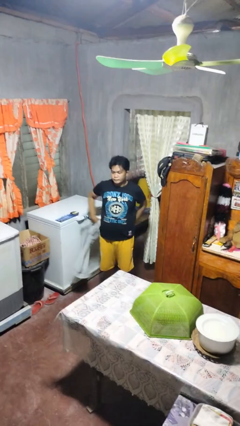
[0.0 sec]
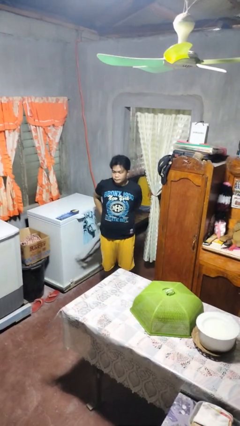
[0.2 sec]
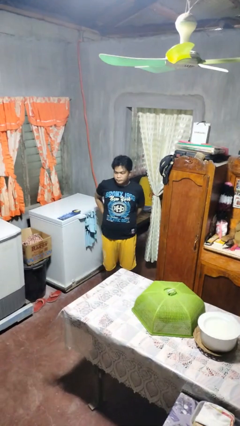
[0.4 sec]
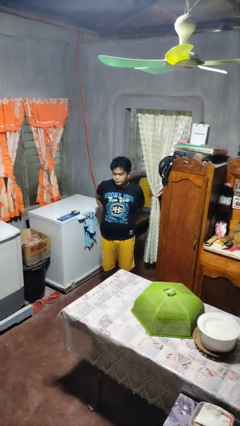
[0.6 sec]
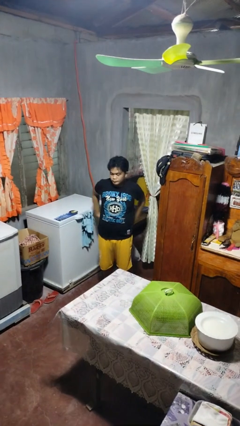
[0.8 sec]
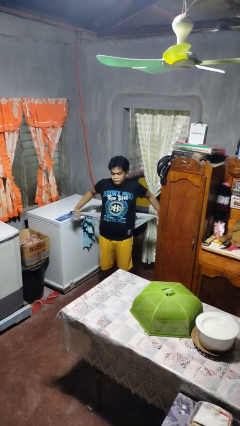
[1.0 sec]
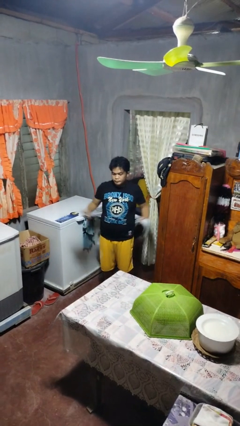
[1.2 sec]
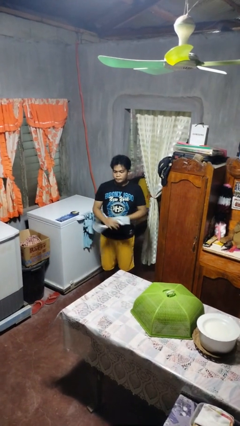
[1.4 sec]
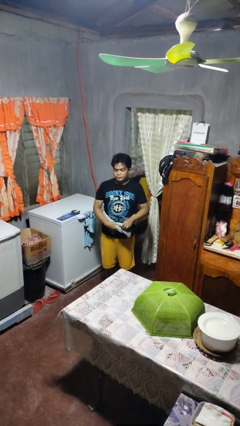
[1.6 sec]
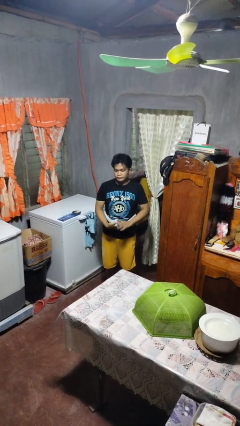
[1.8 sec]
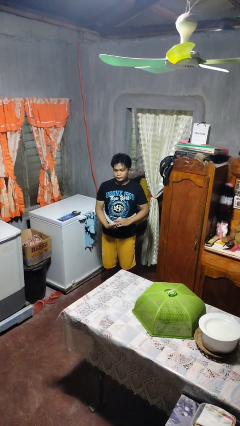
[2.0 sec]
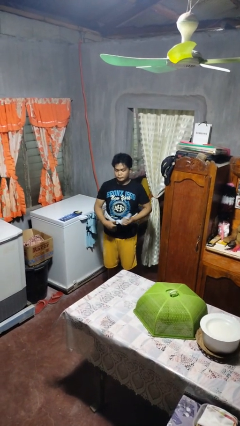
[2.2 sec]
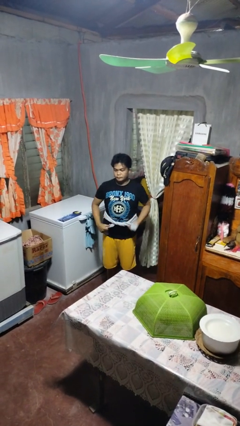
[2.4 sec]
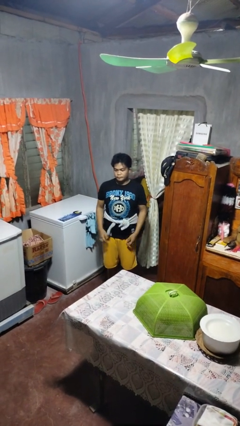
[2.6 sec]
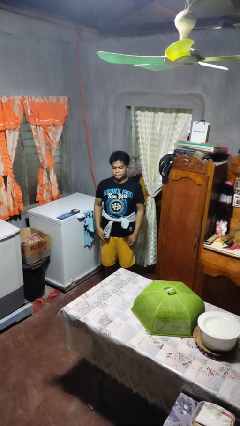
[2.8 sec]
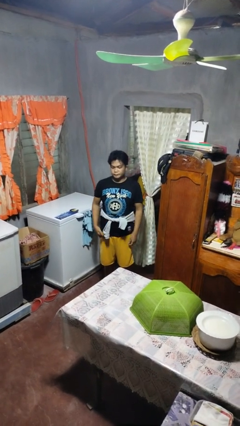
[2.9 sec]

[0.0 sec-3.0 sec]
person ties jacket around waist

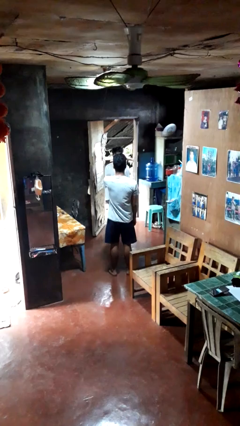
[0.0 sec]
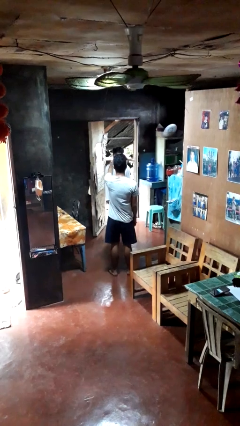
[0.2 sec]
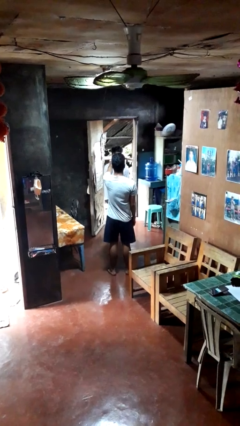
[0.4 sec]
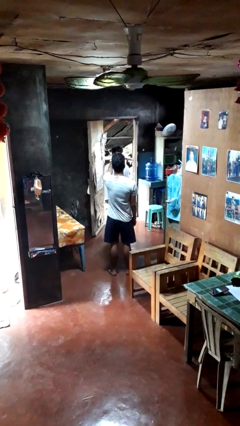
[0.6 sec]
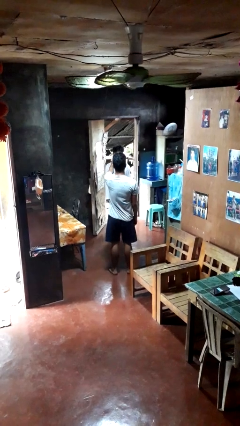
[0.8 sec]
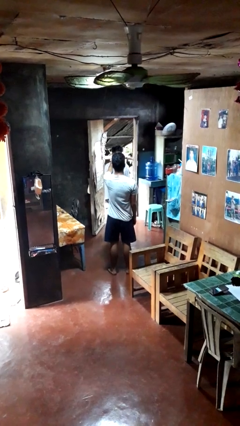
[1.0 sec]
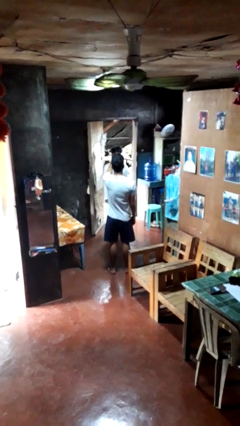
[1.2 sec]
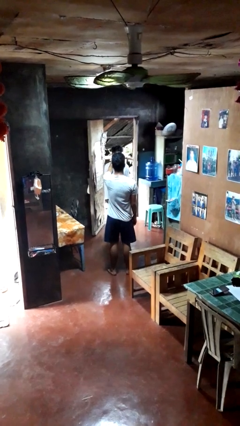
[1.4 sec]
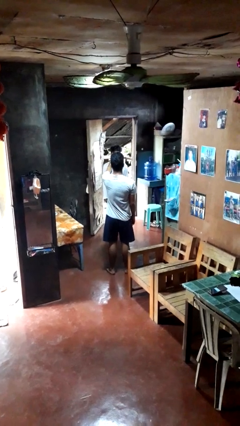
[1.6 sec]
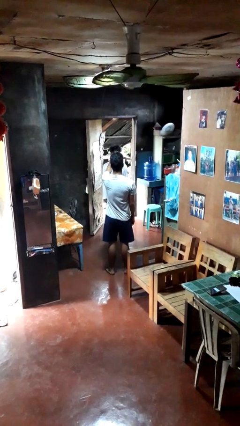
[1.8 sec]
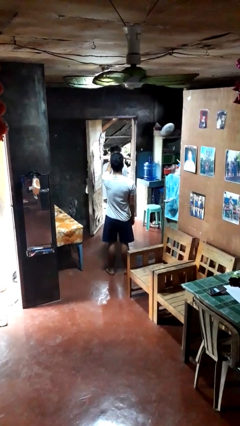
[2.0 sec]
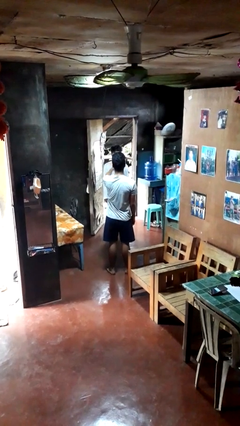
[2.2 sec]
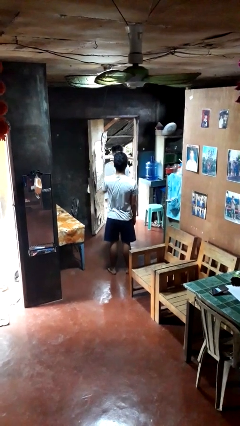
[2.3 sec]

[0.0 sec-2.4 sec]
person points at person

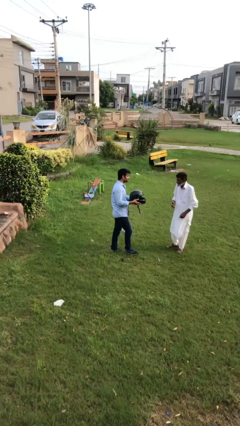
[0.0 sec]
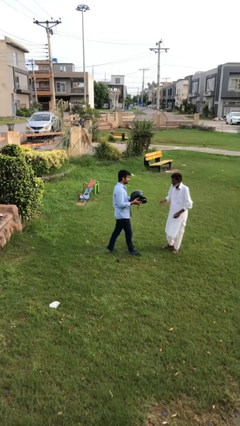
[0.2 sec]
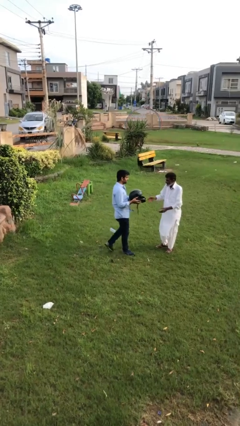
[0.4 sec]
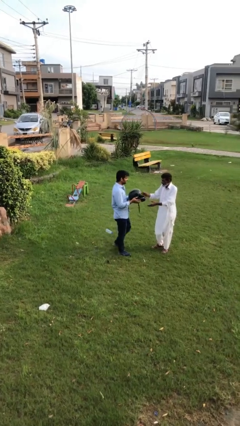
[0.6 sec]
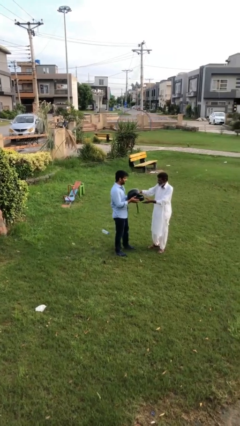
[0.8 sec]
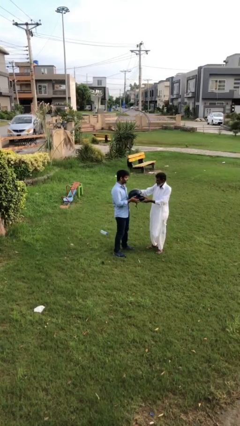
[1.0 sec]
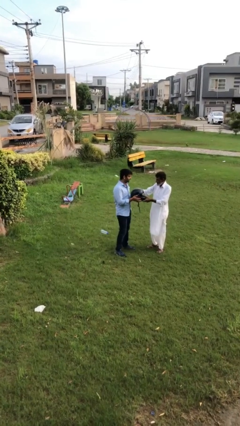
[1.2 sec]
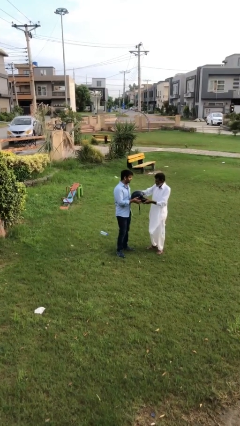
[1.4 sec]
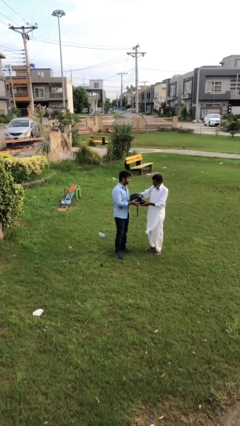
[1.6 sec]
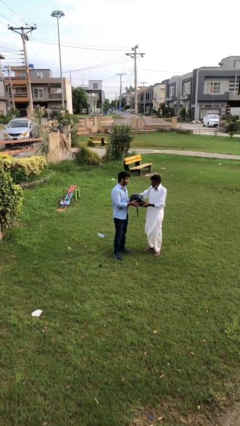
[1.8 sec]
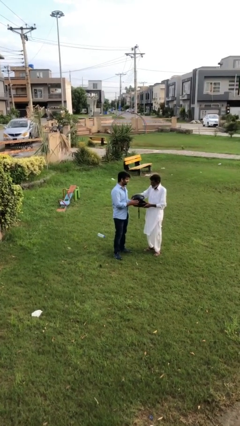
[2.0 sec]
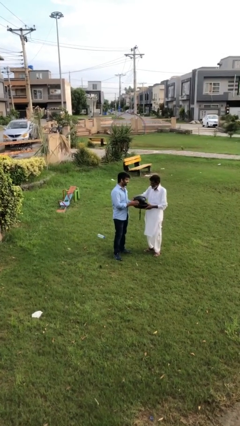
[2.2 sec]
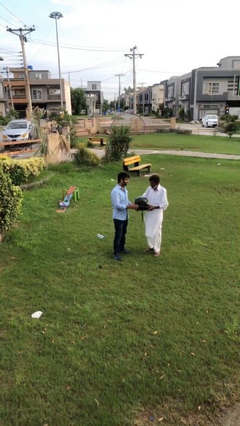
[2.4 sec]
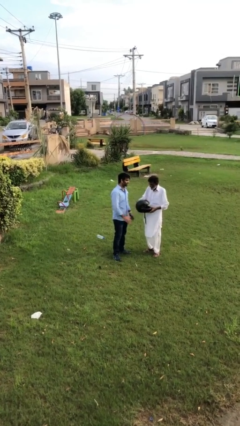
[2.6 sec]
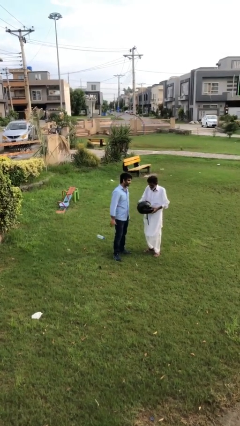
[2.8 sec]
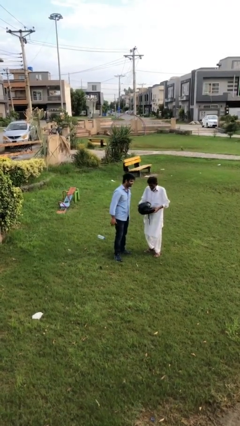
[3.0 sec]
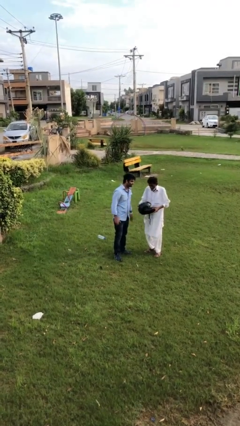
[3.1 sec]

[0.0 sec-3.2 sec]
person transfers object to person

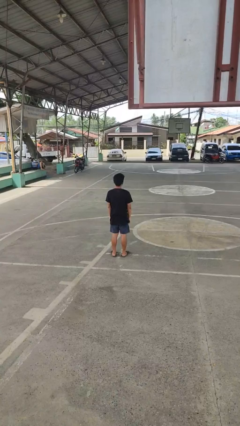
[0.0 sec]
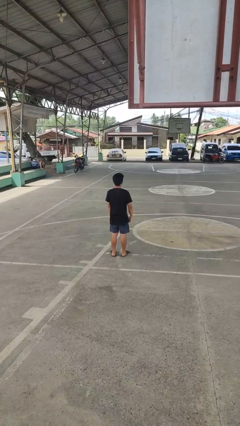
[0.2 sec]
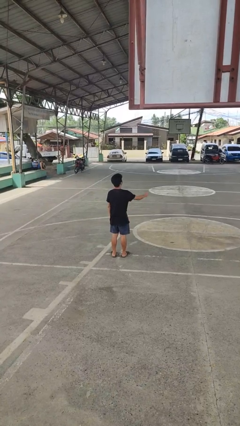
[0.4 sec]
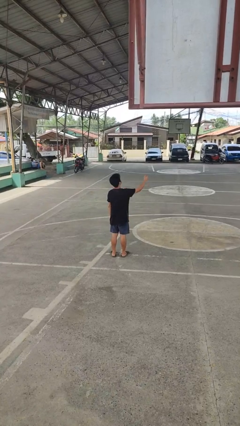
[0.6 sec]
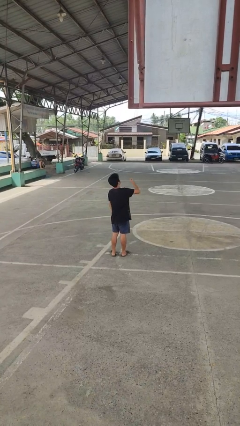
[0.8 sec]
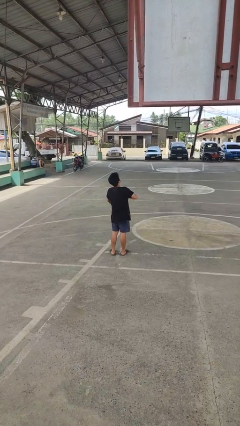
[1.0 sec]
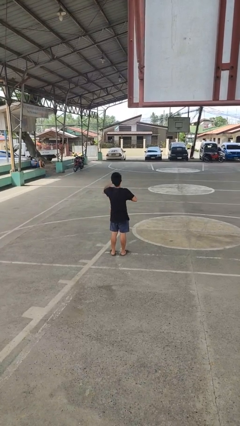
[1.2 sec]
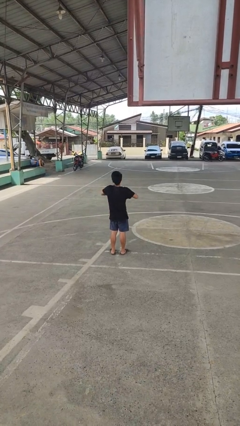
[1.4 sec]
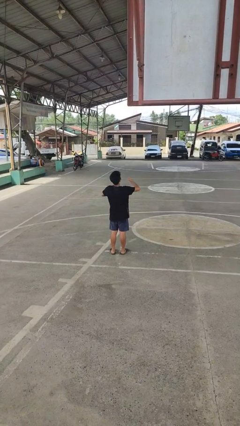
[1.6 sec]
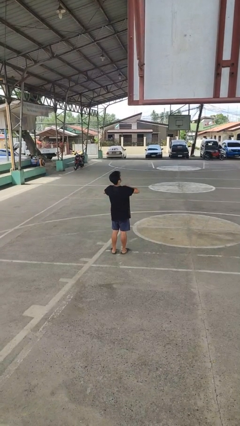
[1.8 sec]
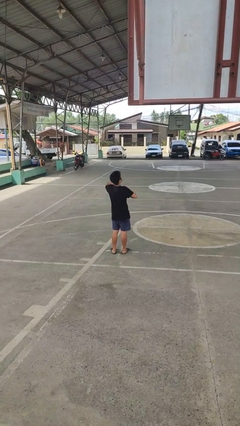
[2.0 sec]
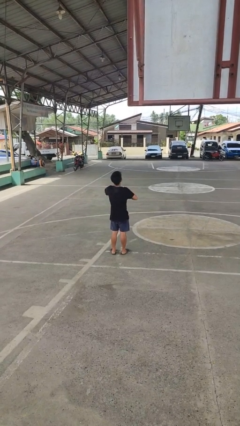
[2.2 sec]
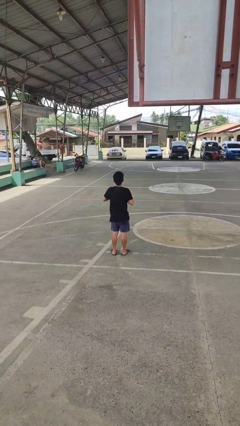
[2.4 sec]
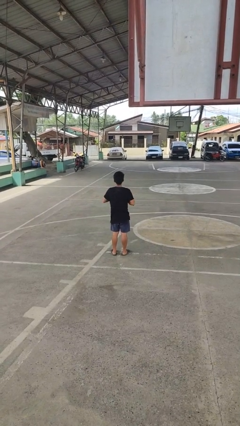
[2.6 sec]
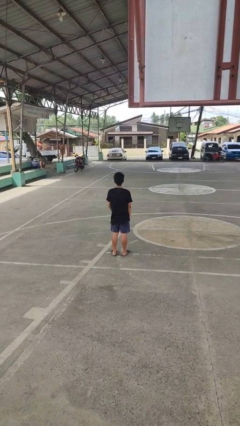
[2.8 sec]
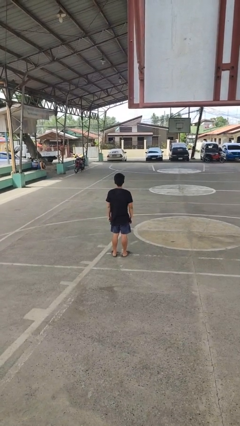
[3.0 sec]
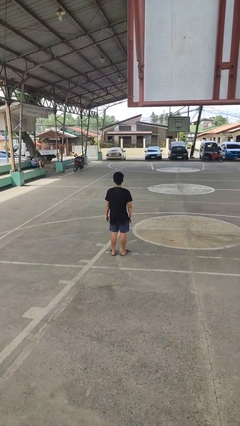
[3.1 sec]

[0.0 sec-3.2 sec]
person drums on chest

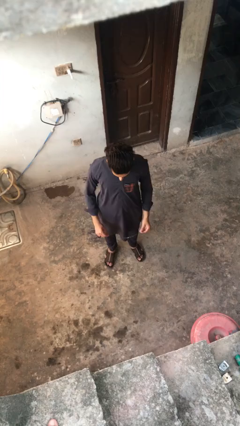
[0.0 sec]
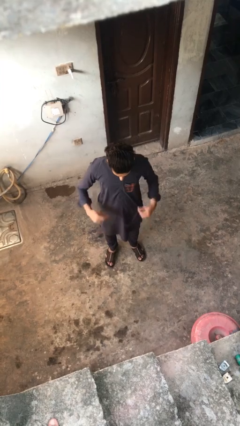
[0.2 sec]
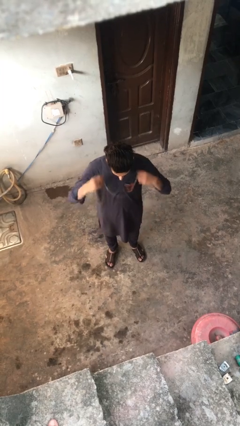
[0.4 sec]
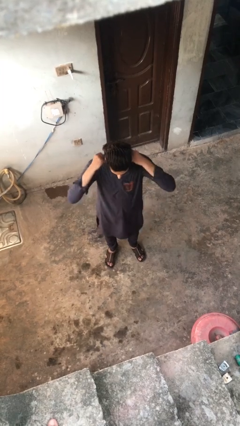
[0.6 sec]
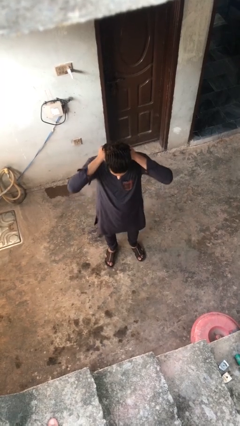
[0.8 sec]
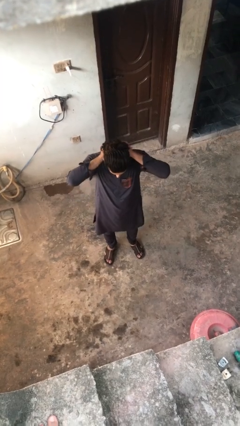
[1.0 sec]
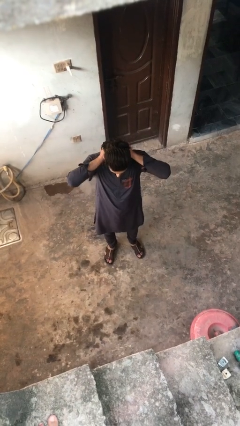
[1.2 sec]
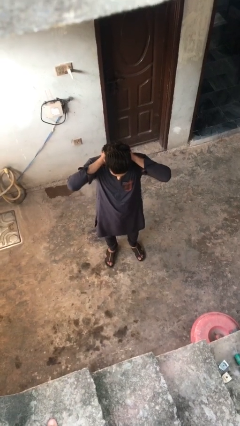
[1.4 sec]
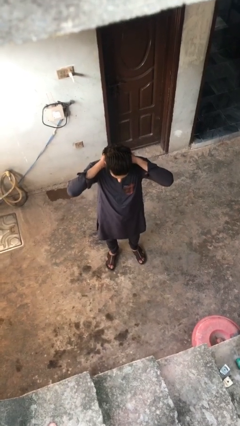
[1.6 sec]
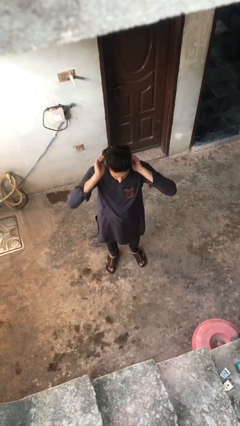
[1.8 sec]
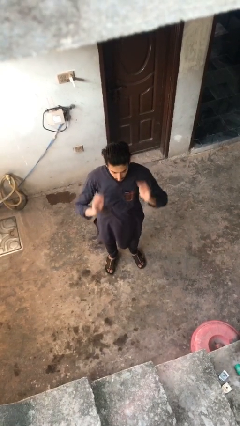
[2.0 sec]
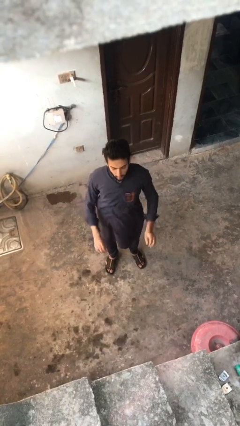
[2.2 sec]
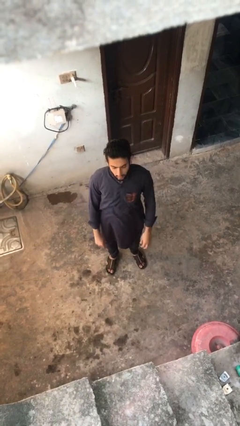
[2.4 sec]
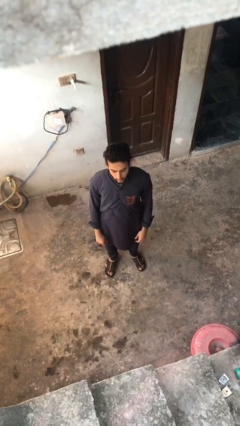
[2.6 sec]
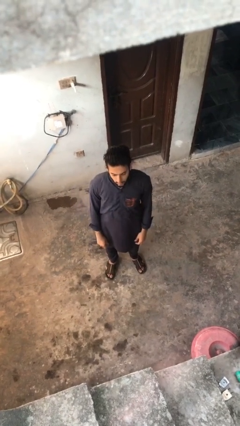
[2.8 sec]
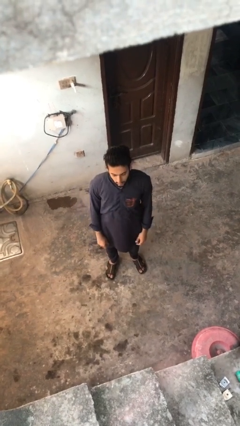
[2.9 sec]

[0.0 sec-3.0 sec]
person puts on necklace

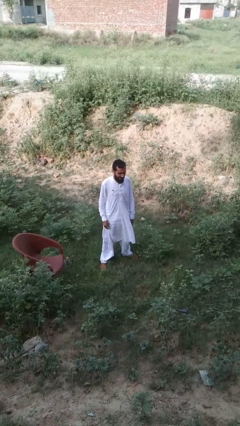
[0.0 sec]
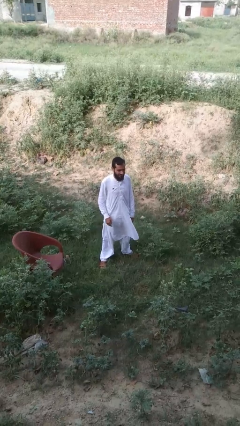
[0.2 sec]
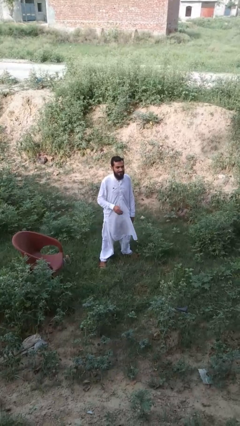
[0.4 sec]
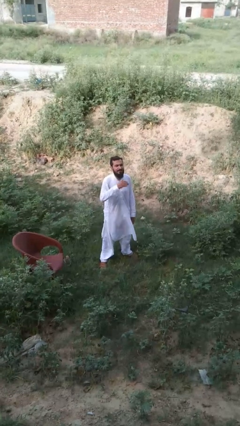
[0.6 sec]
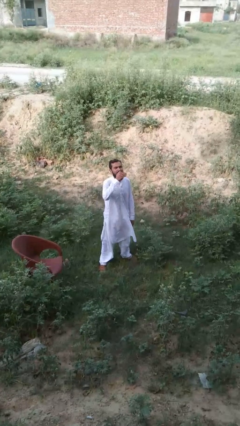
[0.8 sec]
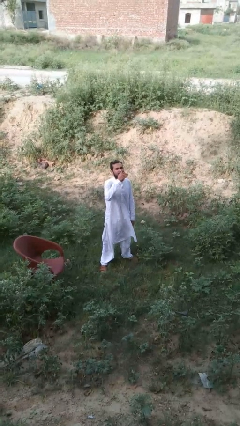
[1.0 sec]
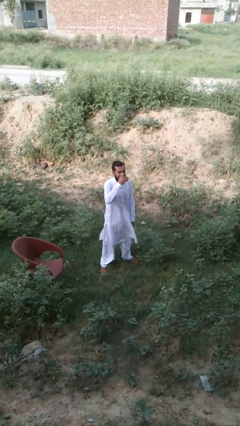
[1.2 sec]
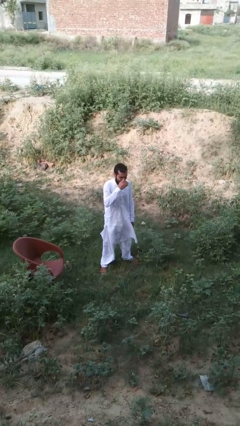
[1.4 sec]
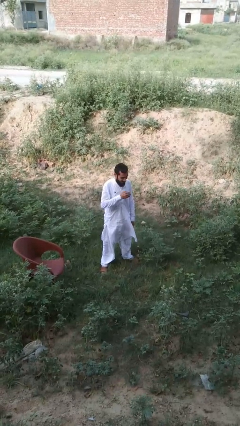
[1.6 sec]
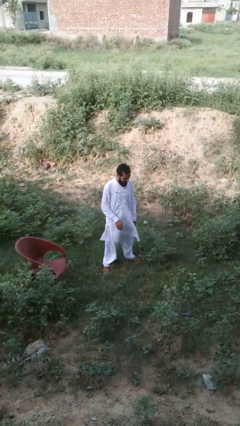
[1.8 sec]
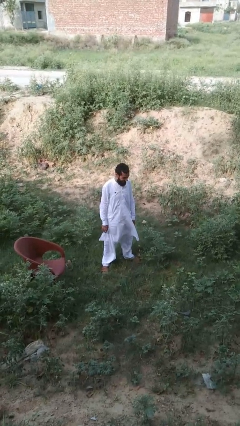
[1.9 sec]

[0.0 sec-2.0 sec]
person sneezes into hand

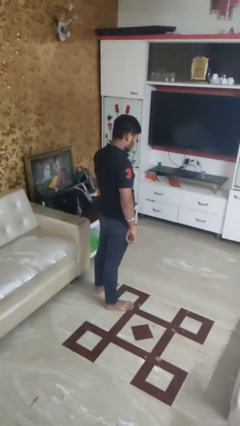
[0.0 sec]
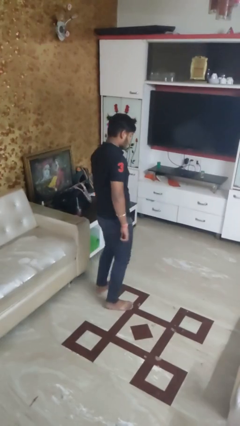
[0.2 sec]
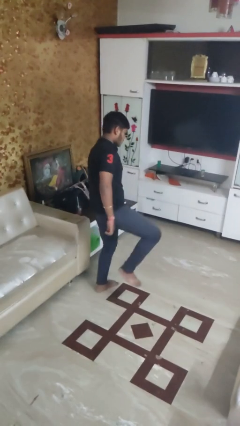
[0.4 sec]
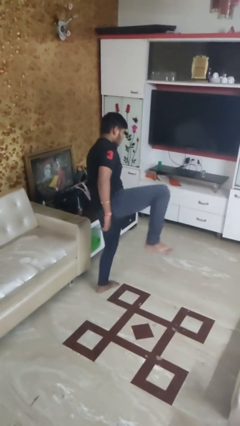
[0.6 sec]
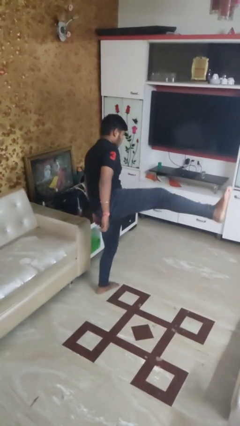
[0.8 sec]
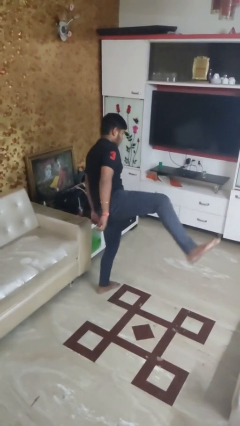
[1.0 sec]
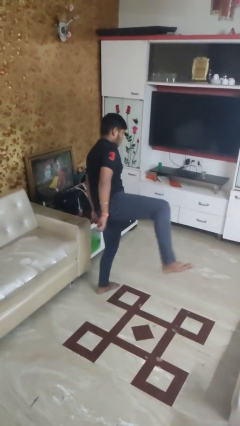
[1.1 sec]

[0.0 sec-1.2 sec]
person karate kicks
